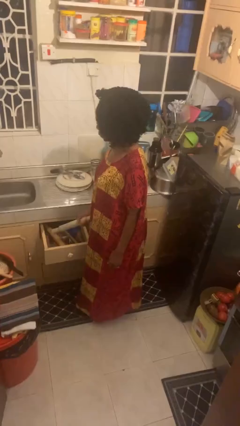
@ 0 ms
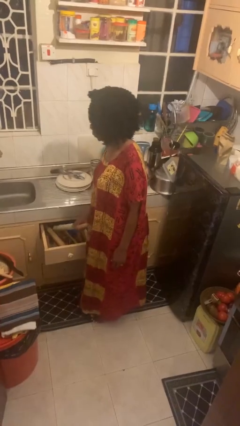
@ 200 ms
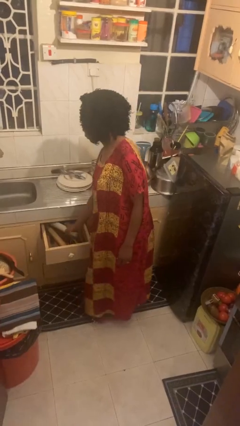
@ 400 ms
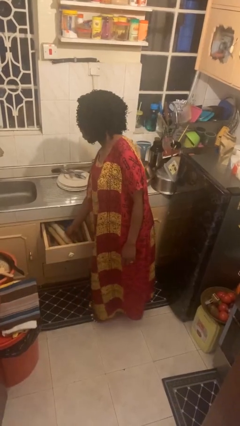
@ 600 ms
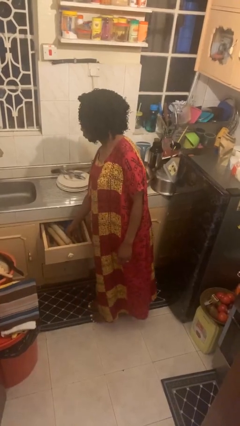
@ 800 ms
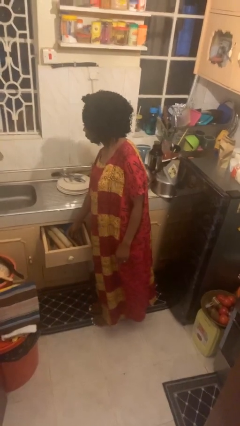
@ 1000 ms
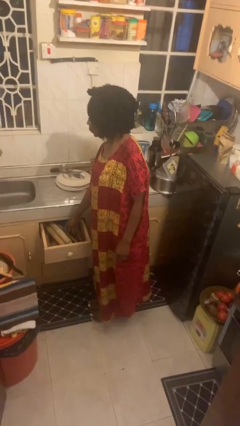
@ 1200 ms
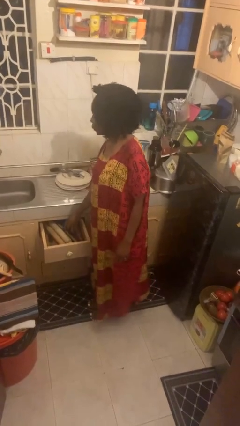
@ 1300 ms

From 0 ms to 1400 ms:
person puts object into kitchen drawer

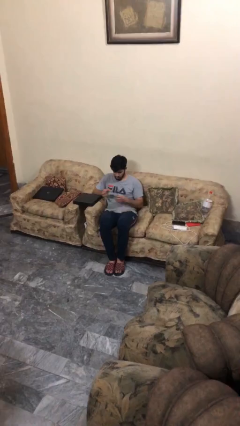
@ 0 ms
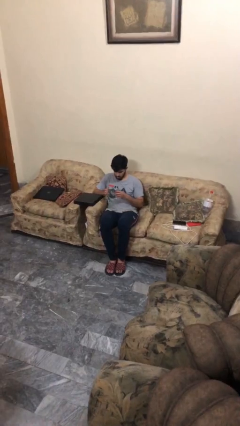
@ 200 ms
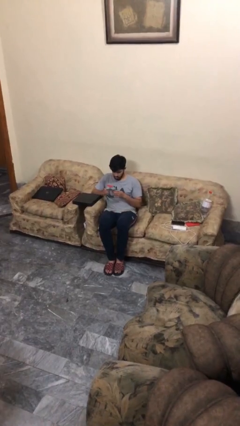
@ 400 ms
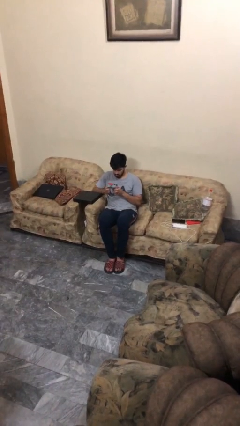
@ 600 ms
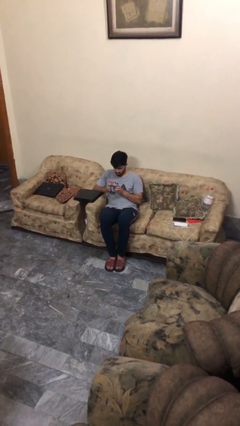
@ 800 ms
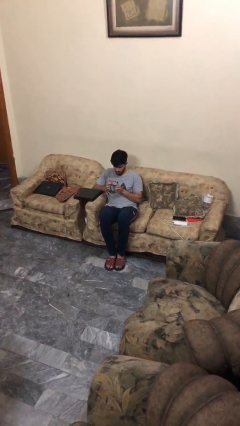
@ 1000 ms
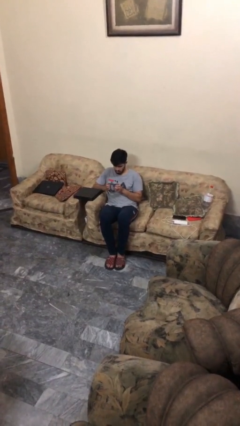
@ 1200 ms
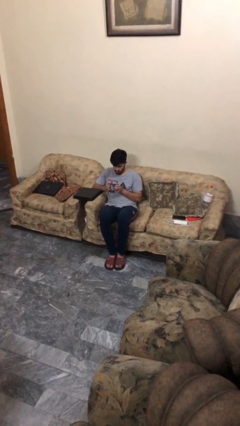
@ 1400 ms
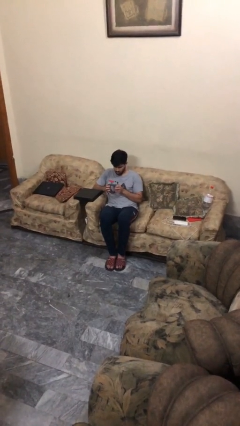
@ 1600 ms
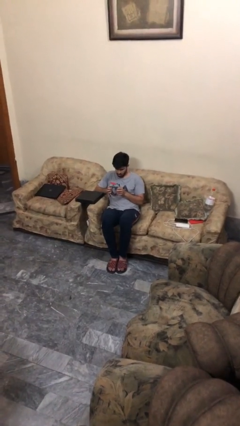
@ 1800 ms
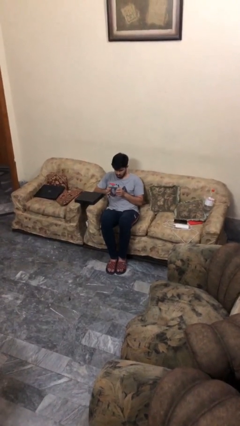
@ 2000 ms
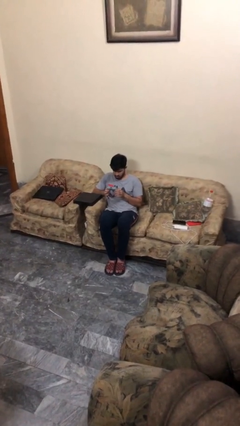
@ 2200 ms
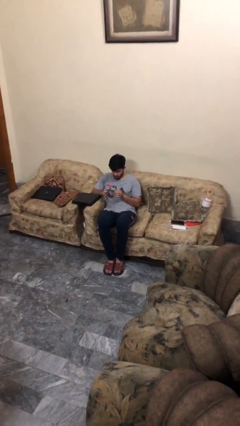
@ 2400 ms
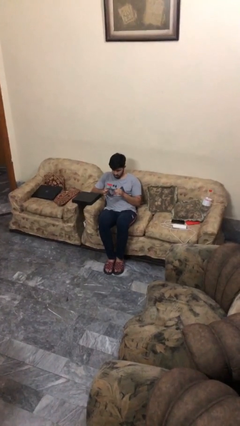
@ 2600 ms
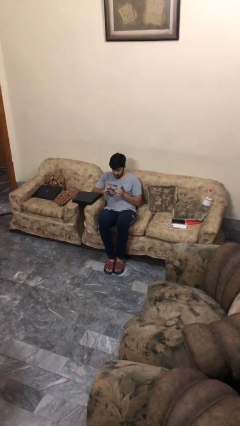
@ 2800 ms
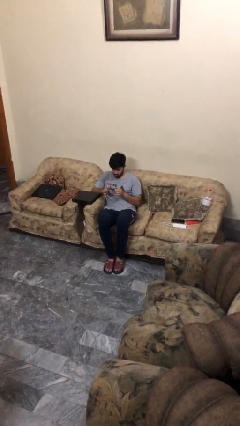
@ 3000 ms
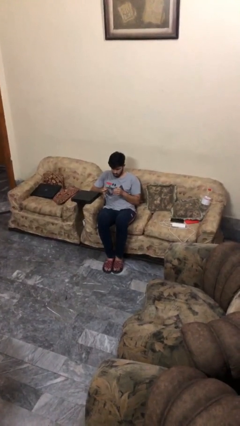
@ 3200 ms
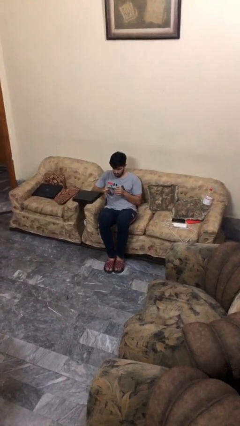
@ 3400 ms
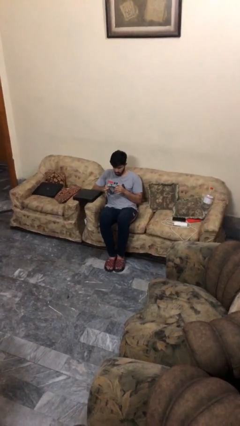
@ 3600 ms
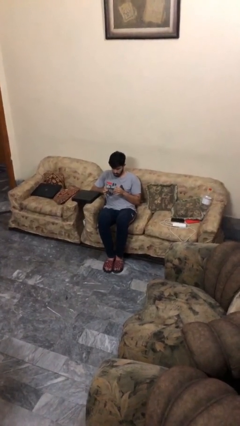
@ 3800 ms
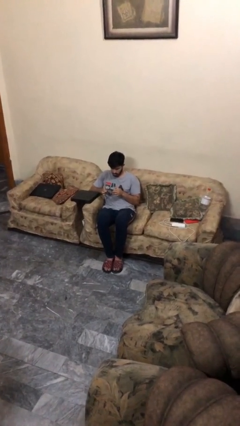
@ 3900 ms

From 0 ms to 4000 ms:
person interacts with handheld game

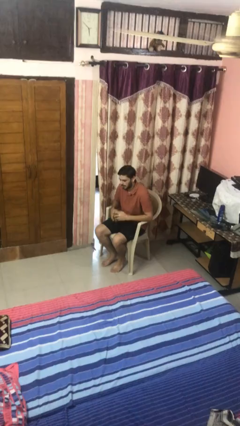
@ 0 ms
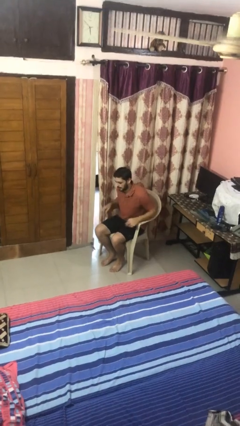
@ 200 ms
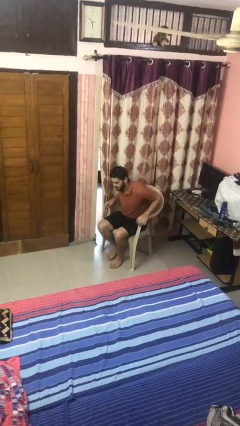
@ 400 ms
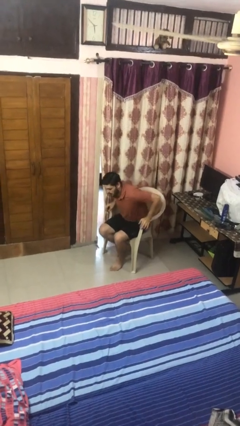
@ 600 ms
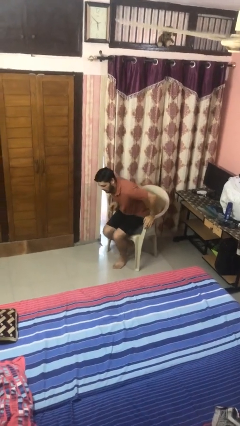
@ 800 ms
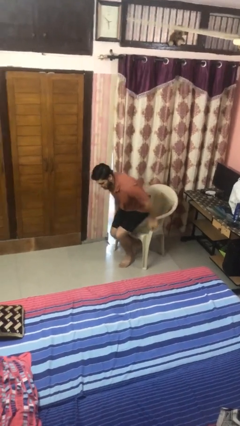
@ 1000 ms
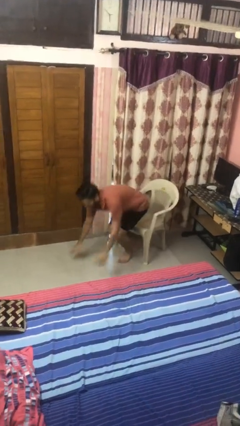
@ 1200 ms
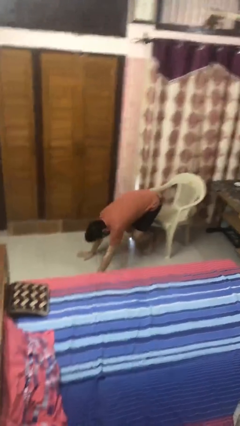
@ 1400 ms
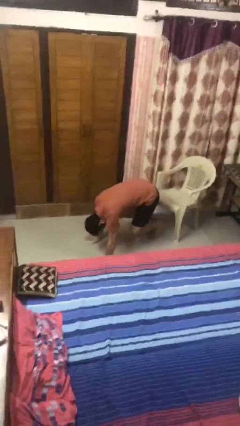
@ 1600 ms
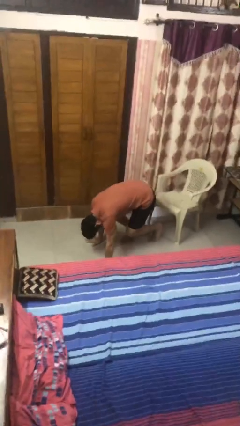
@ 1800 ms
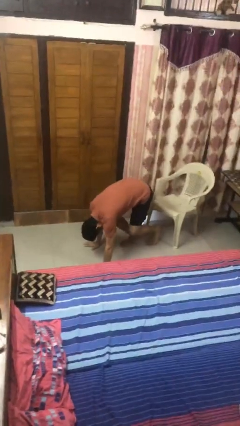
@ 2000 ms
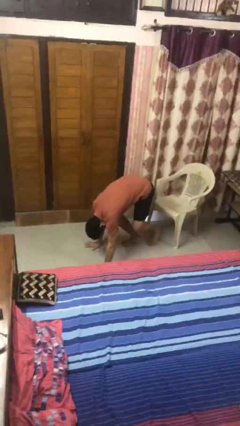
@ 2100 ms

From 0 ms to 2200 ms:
person falls from chair

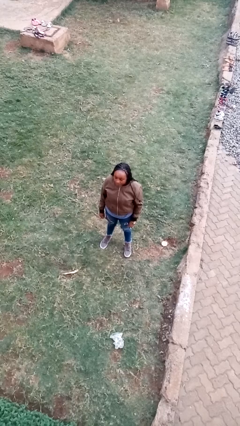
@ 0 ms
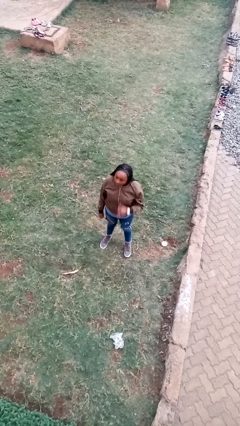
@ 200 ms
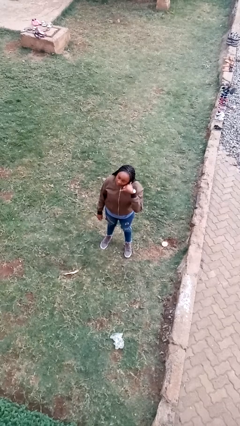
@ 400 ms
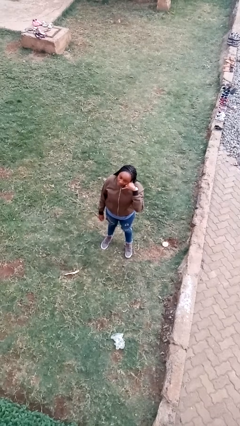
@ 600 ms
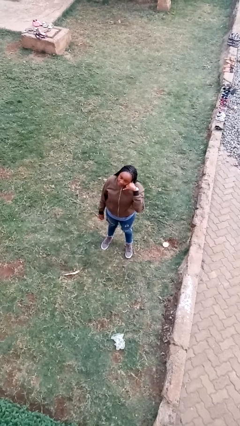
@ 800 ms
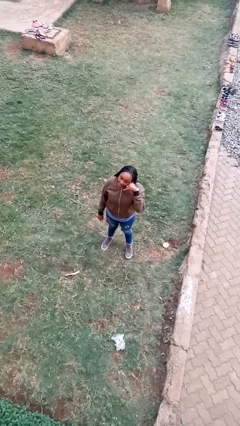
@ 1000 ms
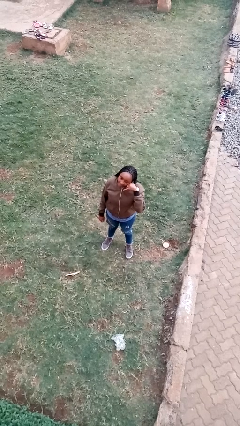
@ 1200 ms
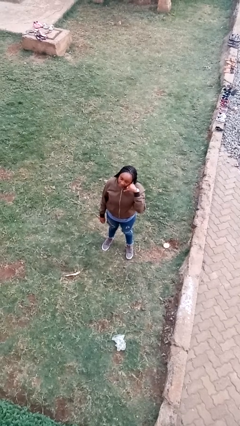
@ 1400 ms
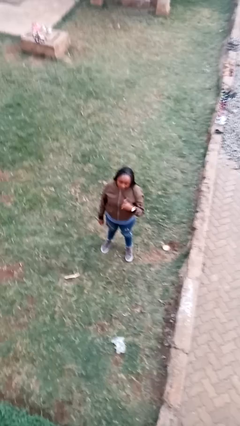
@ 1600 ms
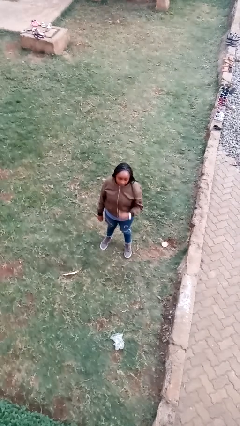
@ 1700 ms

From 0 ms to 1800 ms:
person gestures call me

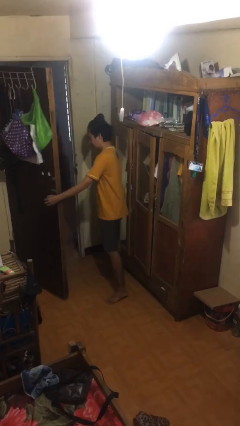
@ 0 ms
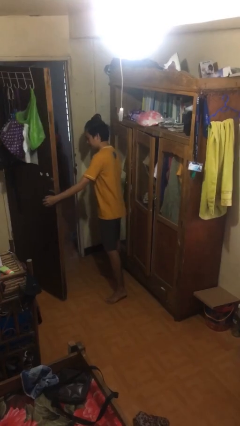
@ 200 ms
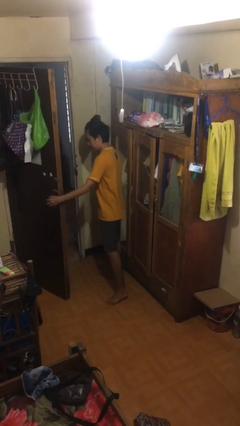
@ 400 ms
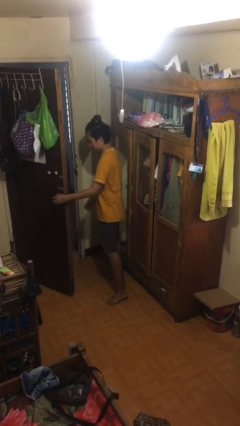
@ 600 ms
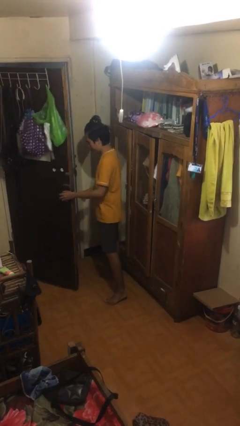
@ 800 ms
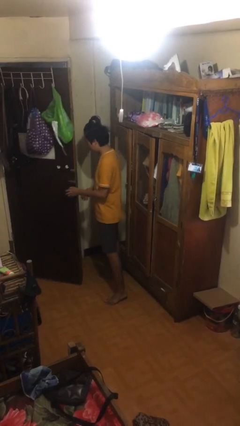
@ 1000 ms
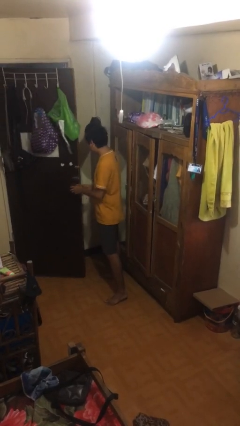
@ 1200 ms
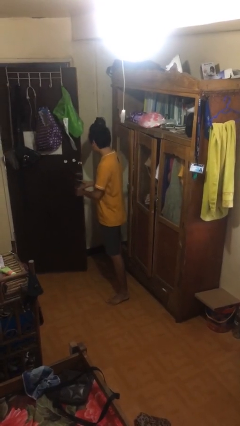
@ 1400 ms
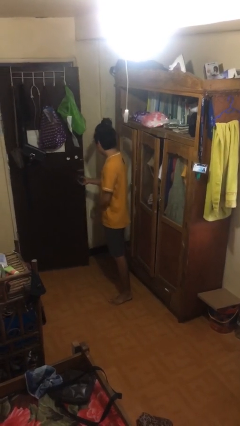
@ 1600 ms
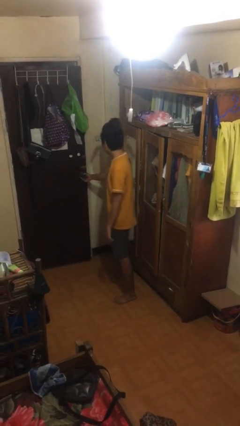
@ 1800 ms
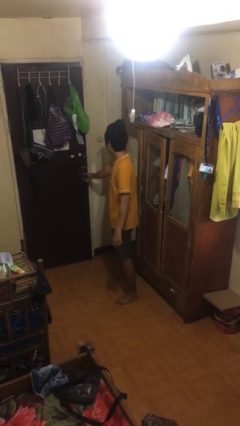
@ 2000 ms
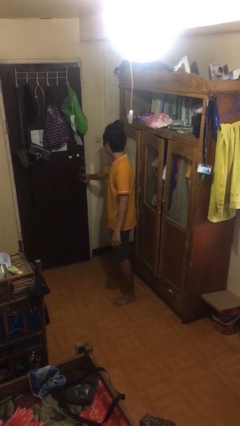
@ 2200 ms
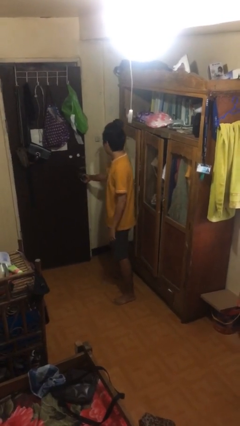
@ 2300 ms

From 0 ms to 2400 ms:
person closes facility door

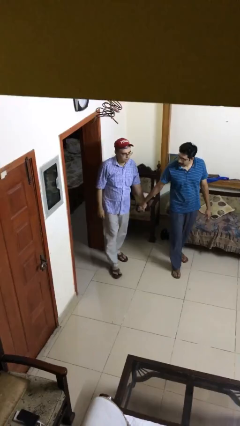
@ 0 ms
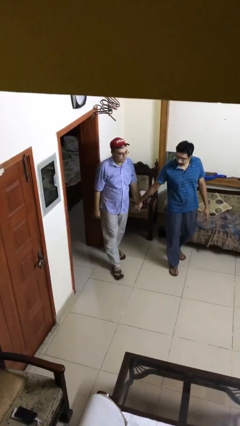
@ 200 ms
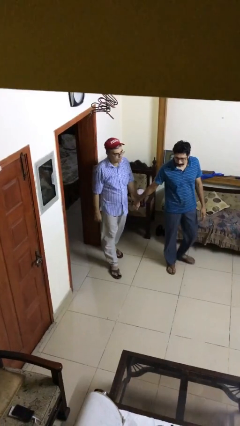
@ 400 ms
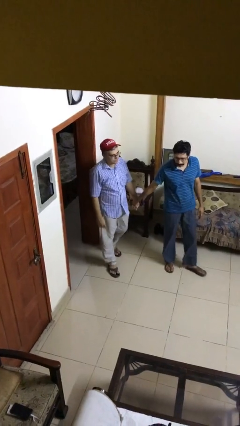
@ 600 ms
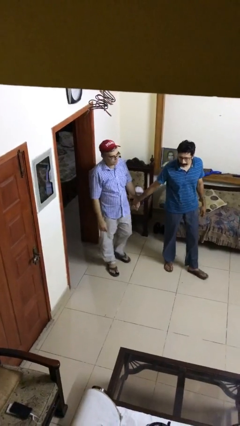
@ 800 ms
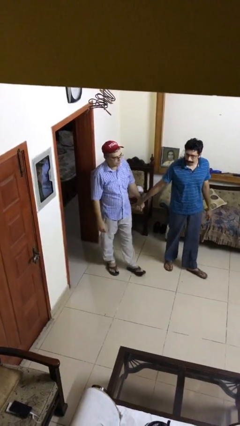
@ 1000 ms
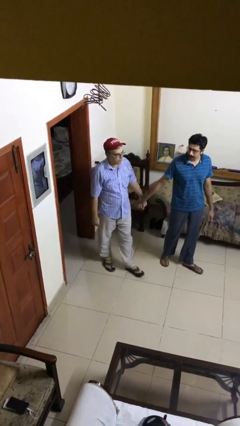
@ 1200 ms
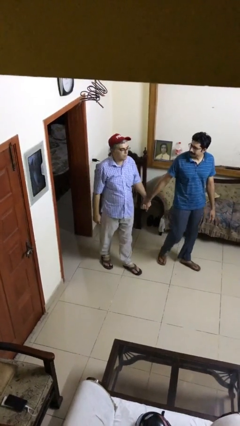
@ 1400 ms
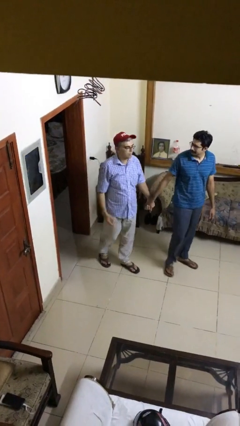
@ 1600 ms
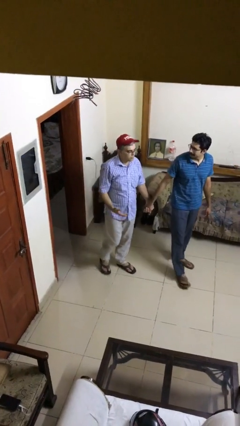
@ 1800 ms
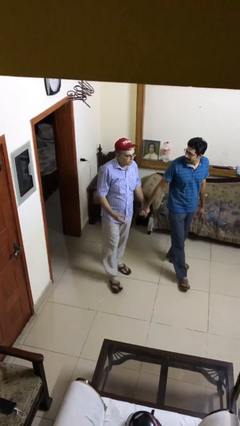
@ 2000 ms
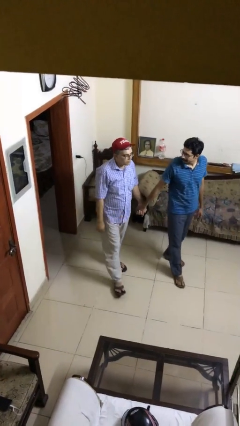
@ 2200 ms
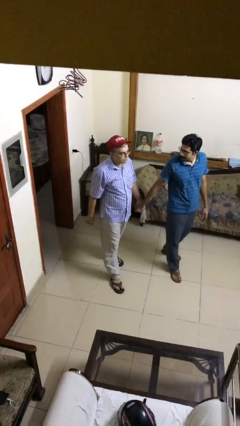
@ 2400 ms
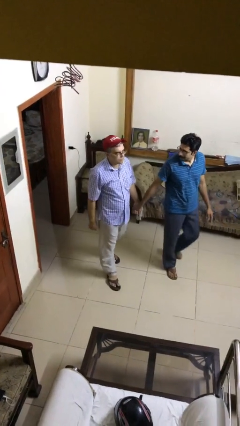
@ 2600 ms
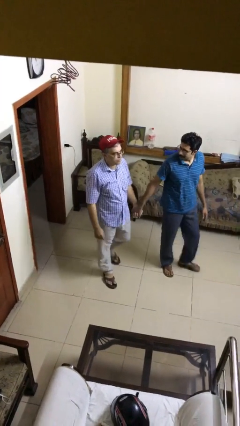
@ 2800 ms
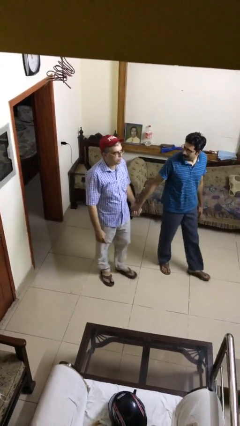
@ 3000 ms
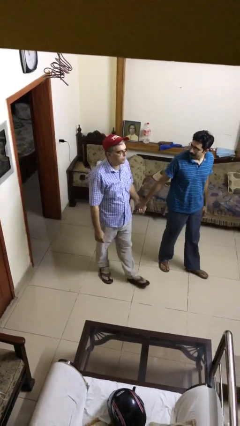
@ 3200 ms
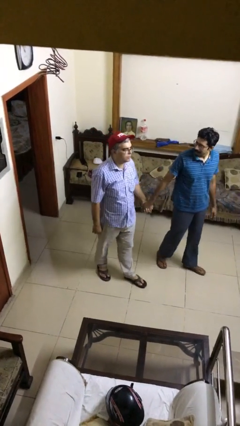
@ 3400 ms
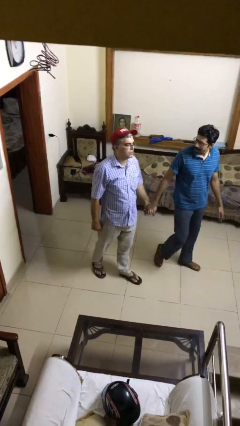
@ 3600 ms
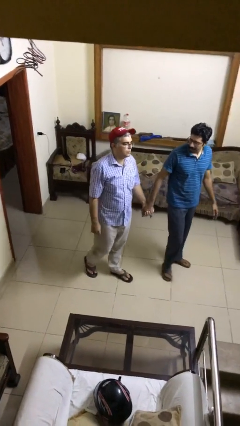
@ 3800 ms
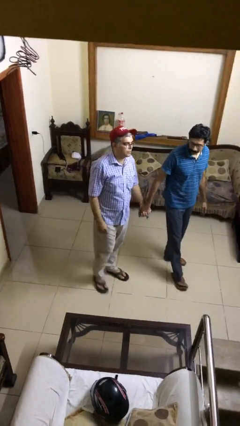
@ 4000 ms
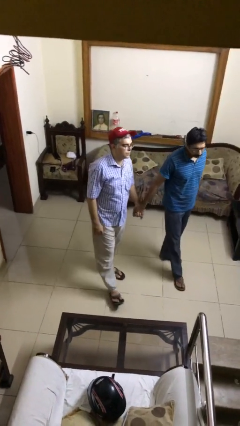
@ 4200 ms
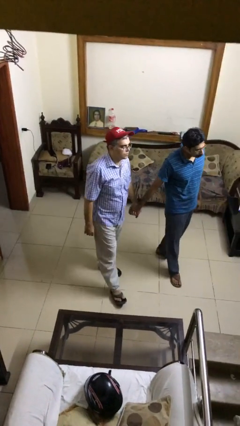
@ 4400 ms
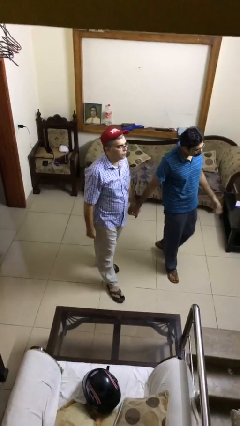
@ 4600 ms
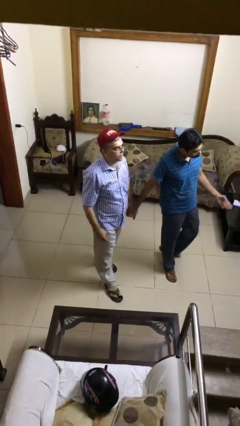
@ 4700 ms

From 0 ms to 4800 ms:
person holds hand

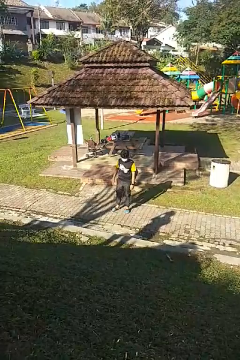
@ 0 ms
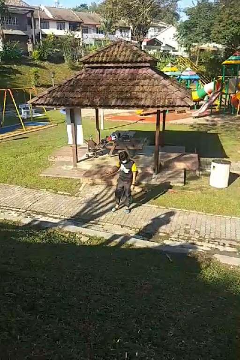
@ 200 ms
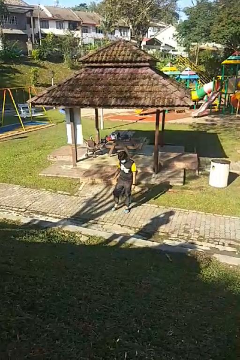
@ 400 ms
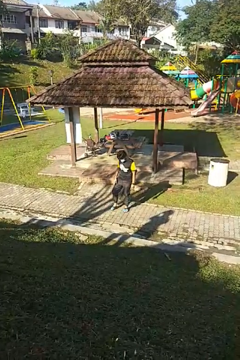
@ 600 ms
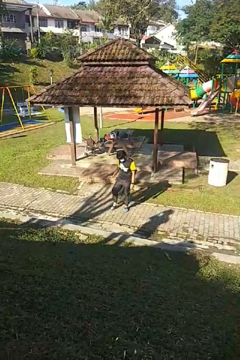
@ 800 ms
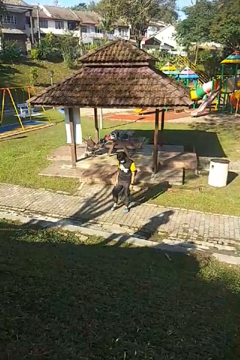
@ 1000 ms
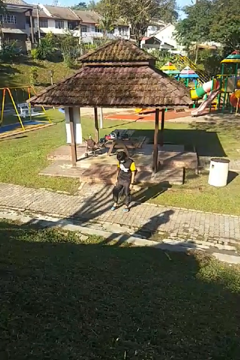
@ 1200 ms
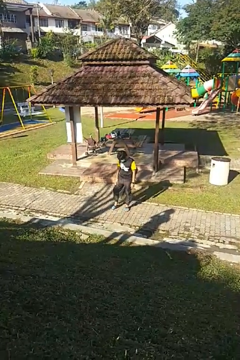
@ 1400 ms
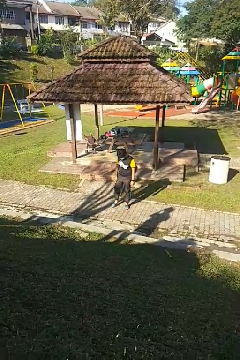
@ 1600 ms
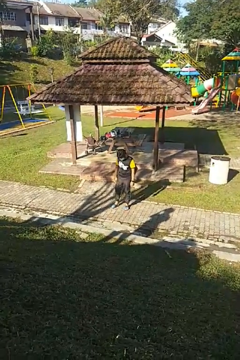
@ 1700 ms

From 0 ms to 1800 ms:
person slaps hands on thighs
